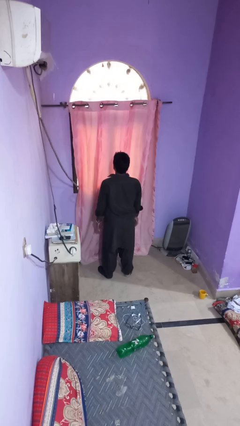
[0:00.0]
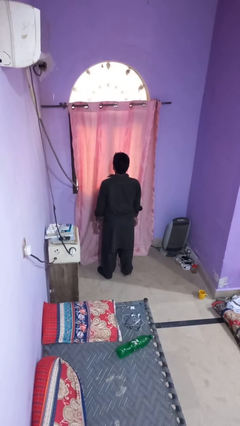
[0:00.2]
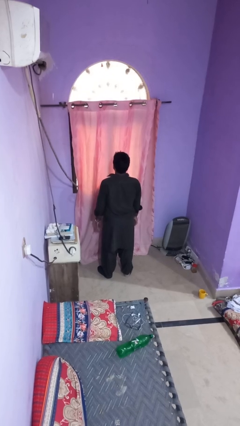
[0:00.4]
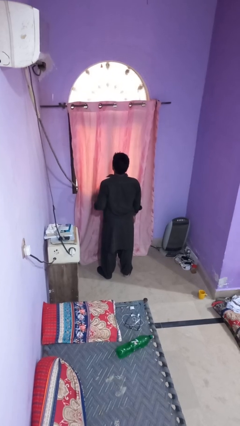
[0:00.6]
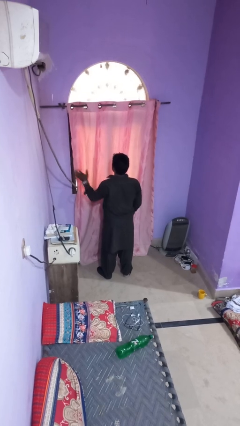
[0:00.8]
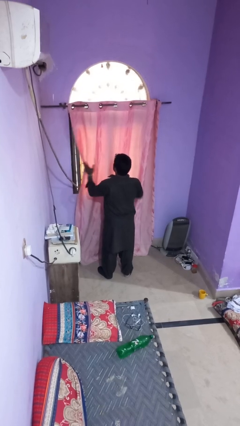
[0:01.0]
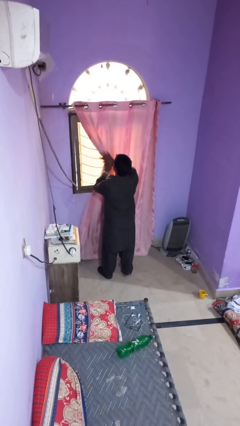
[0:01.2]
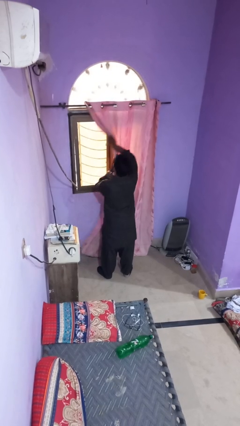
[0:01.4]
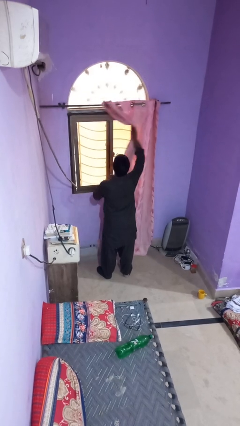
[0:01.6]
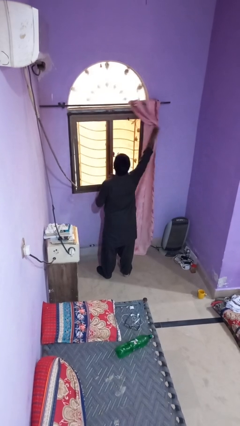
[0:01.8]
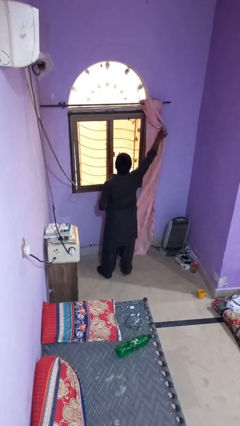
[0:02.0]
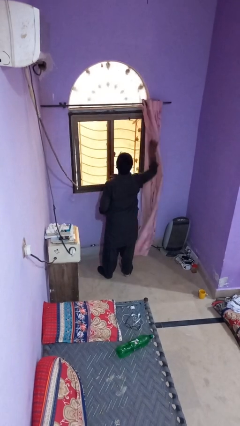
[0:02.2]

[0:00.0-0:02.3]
person opens curtains

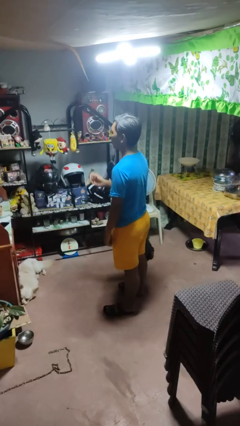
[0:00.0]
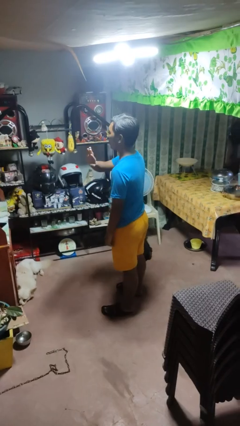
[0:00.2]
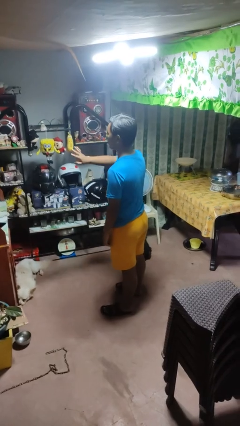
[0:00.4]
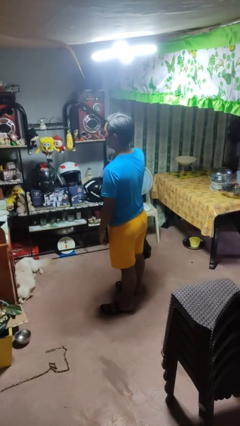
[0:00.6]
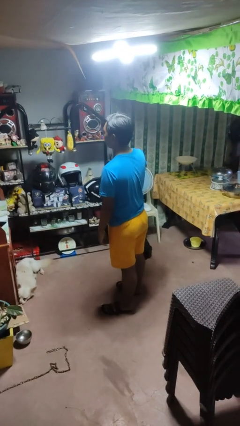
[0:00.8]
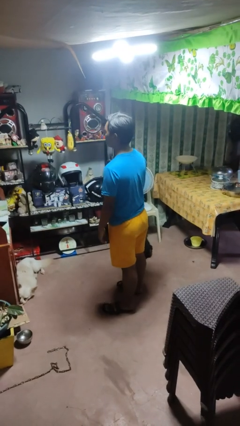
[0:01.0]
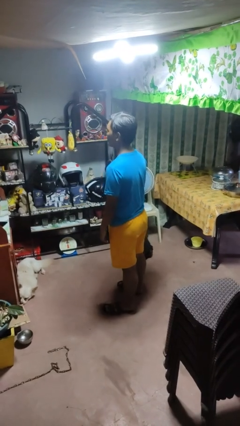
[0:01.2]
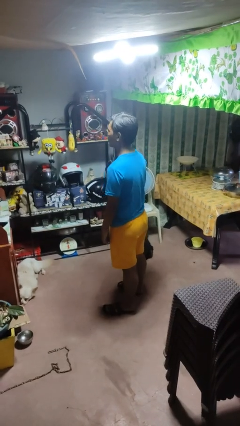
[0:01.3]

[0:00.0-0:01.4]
person gestures swipe right

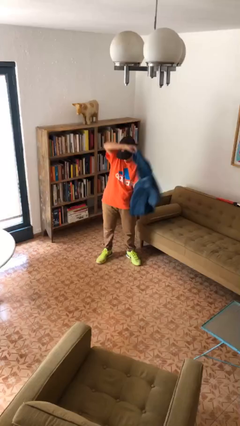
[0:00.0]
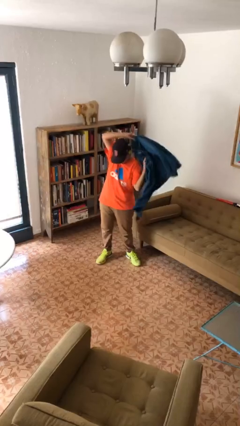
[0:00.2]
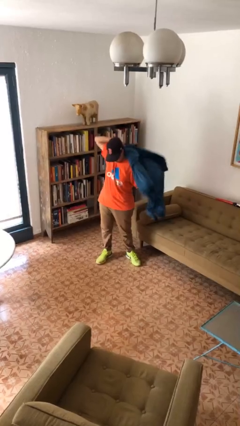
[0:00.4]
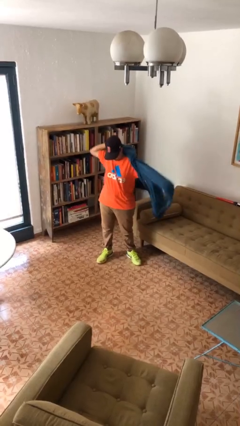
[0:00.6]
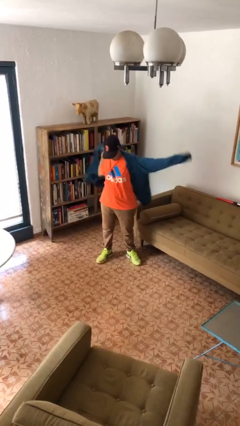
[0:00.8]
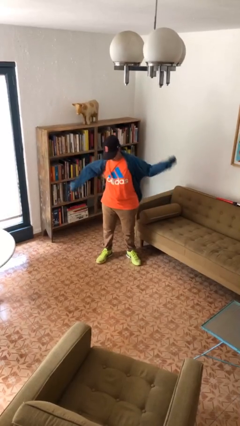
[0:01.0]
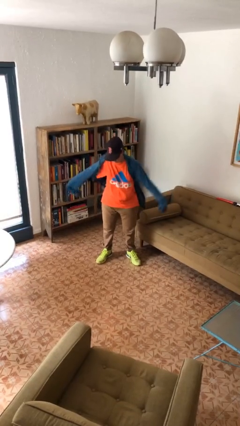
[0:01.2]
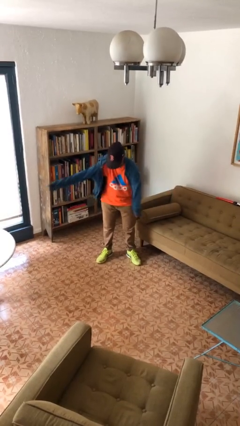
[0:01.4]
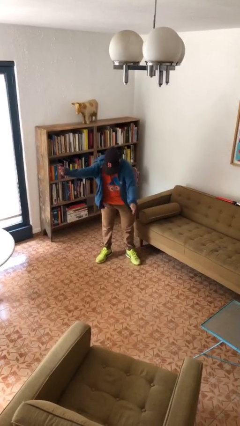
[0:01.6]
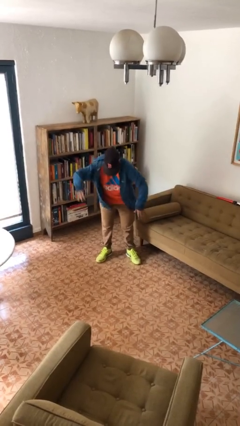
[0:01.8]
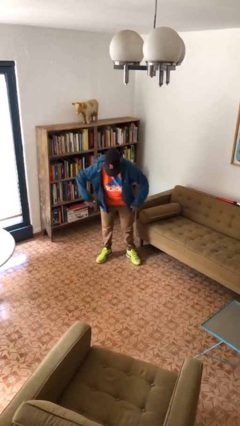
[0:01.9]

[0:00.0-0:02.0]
person puts on jacket

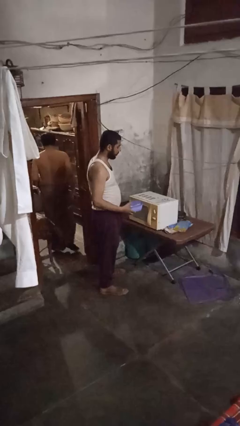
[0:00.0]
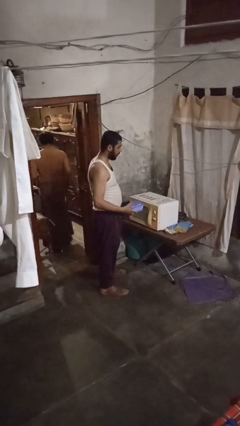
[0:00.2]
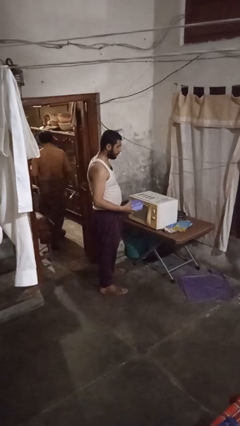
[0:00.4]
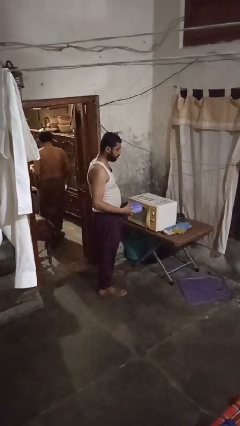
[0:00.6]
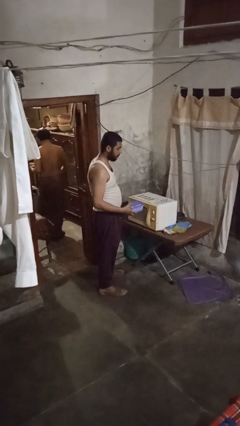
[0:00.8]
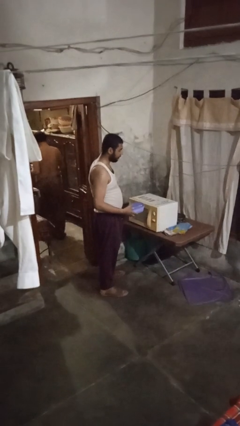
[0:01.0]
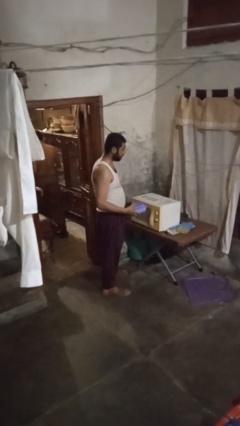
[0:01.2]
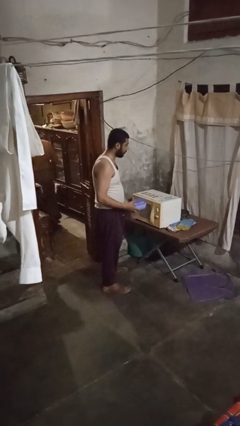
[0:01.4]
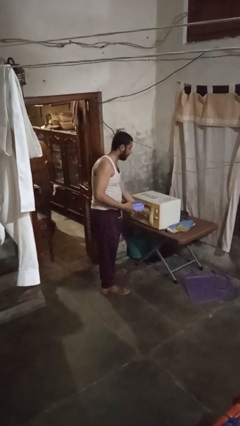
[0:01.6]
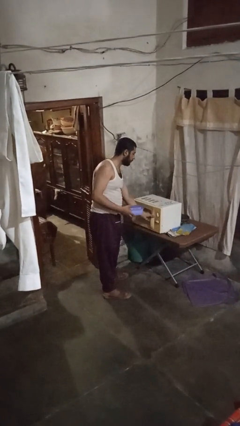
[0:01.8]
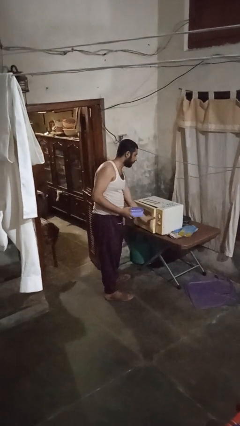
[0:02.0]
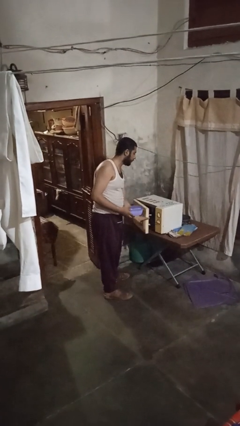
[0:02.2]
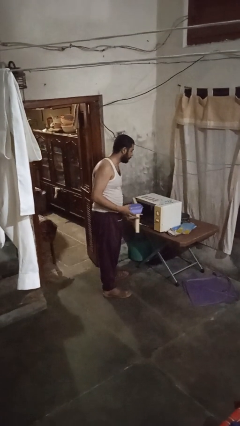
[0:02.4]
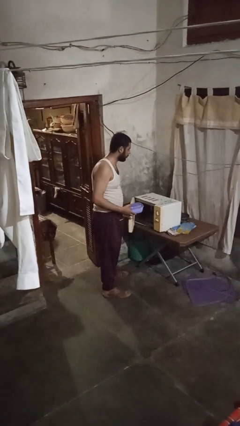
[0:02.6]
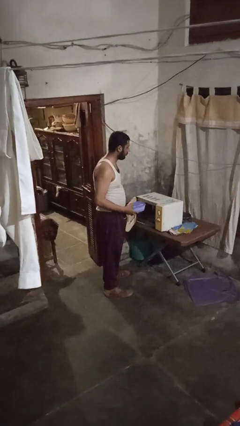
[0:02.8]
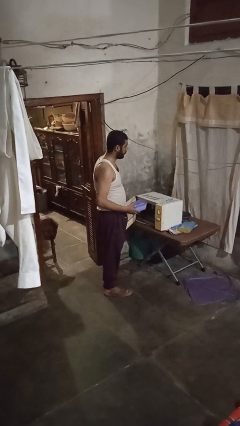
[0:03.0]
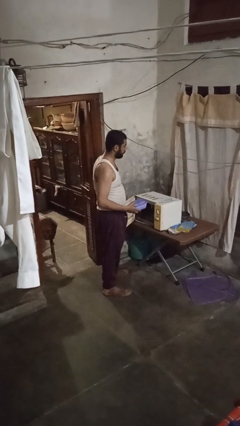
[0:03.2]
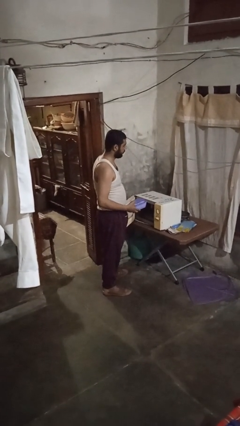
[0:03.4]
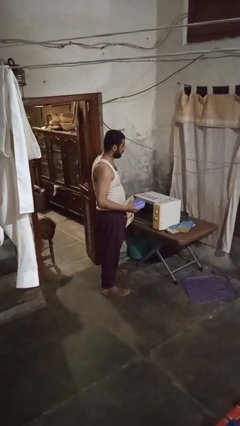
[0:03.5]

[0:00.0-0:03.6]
person opens microwave

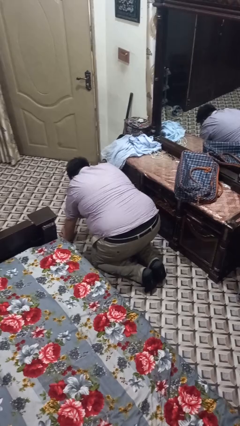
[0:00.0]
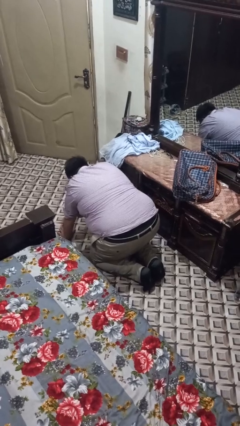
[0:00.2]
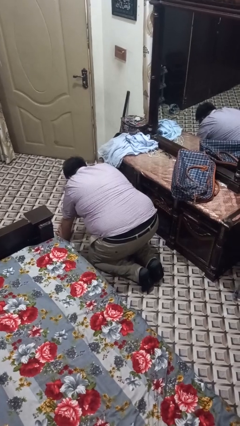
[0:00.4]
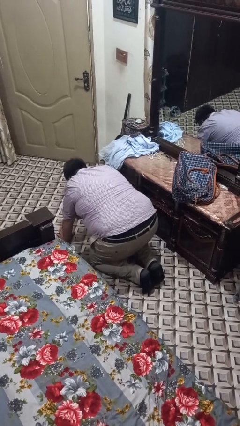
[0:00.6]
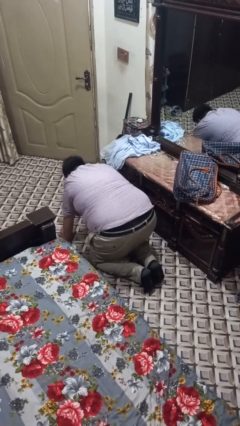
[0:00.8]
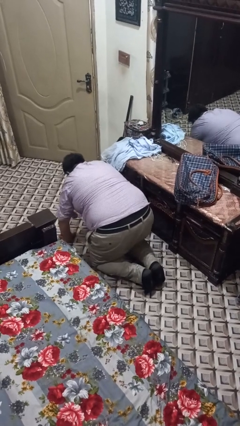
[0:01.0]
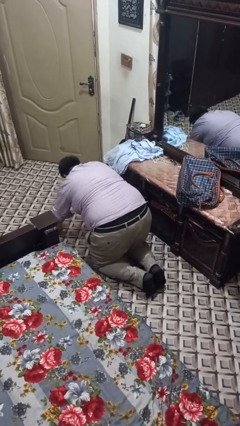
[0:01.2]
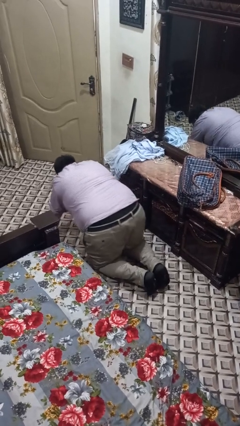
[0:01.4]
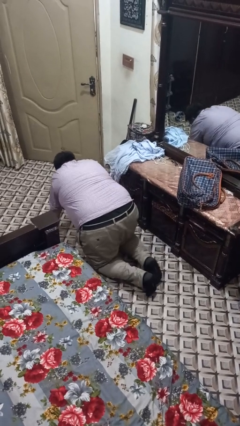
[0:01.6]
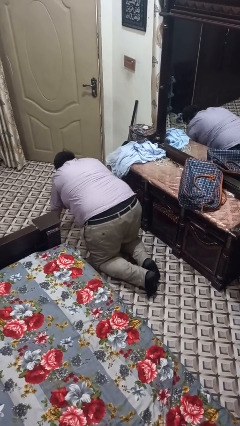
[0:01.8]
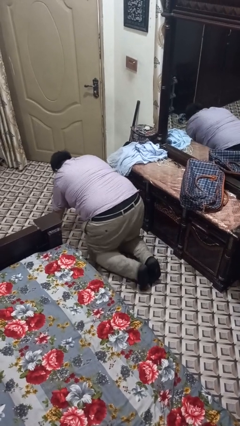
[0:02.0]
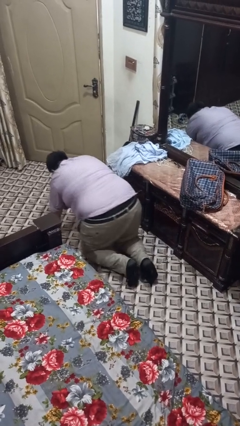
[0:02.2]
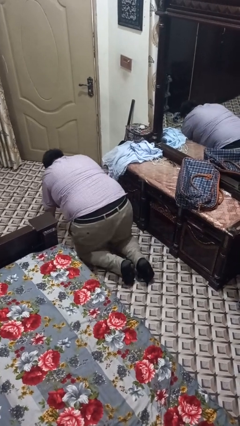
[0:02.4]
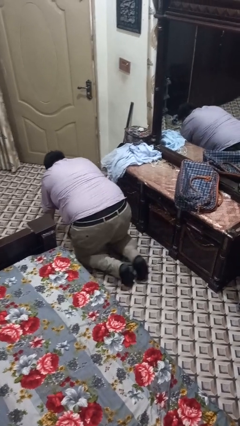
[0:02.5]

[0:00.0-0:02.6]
person crawls

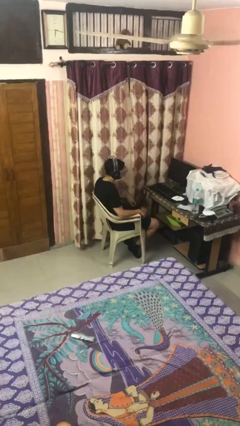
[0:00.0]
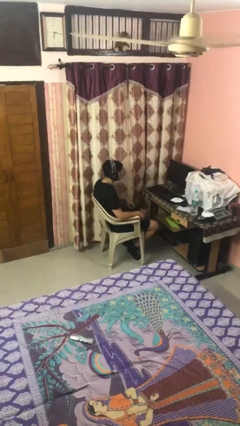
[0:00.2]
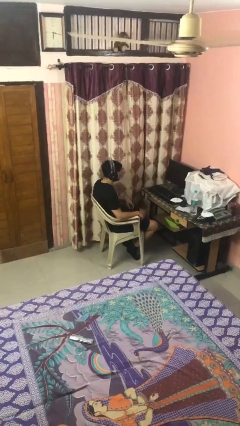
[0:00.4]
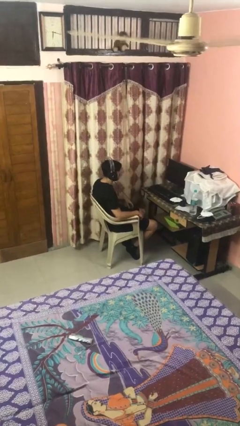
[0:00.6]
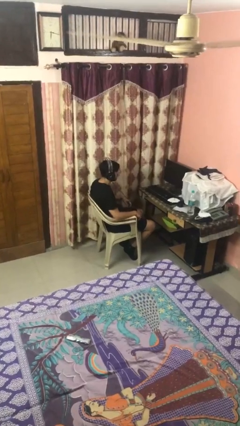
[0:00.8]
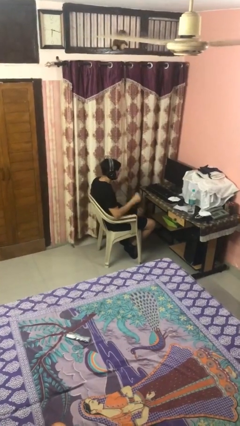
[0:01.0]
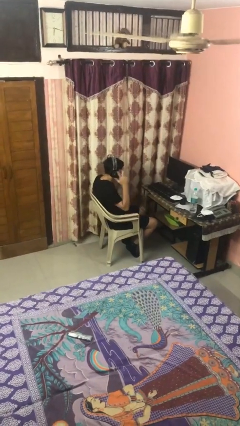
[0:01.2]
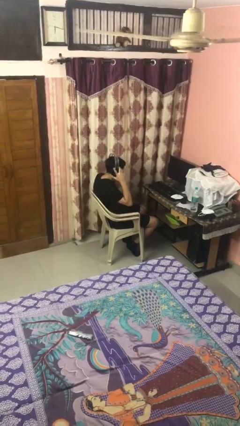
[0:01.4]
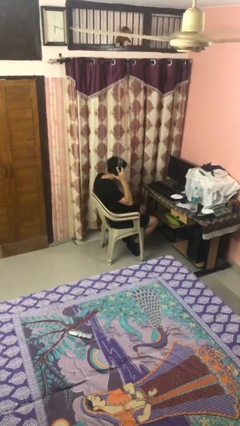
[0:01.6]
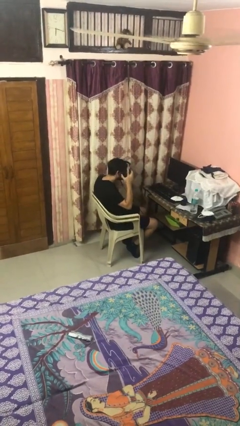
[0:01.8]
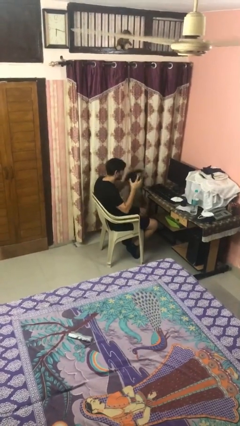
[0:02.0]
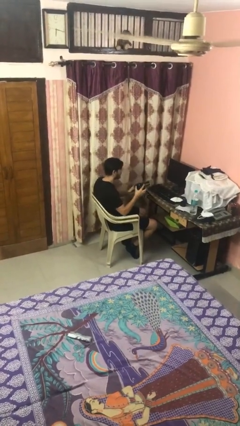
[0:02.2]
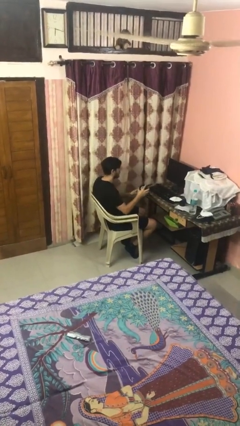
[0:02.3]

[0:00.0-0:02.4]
person takes off headphones

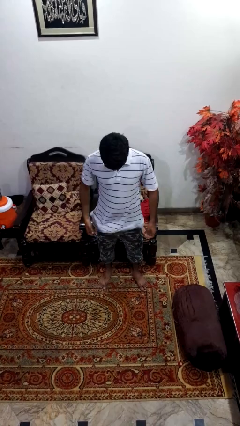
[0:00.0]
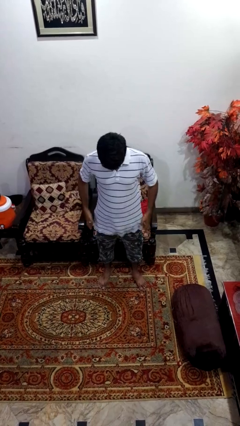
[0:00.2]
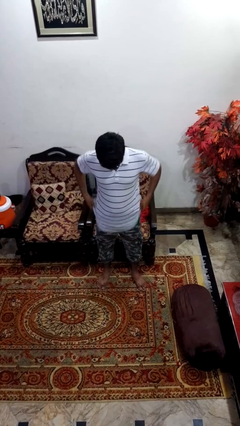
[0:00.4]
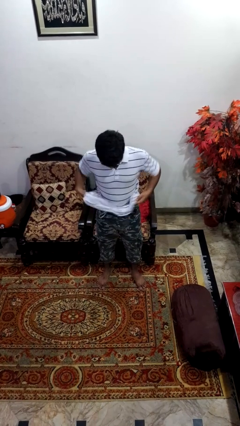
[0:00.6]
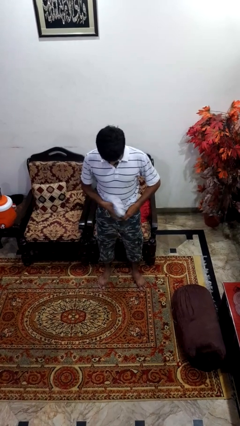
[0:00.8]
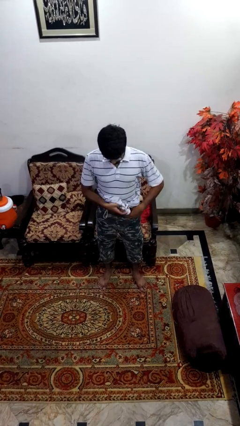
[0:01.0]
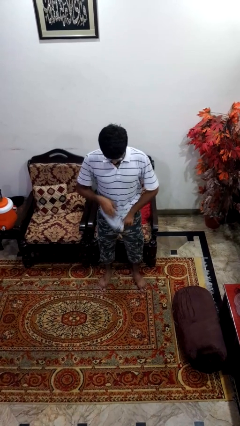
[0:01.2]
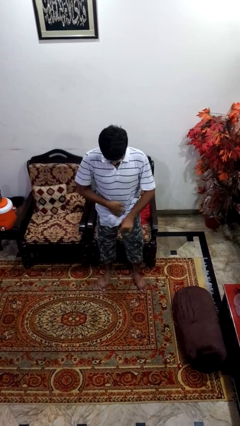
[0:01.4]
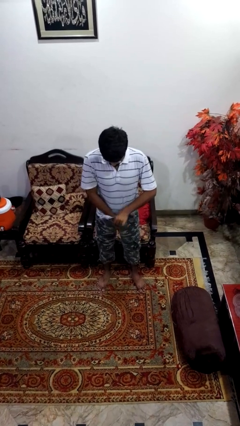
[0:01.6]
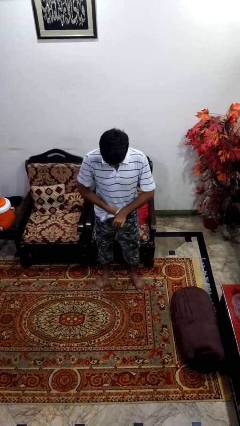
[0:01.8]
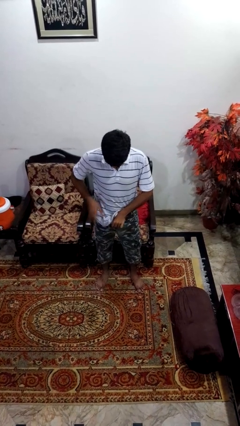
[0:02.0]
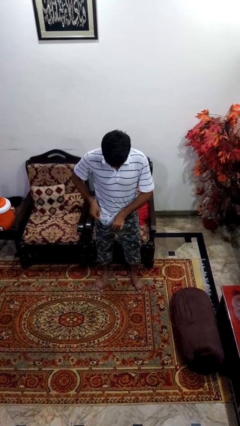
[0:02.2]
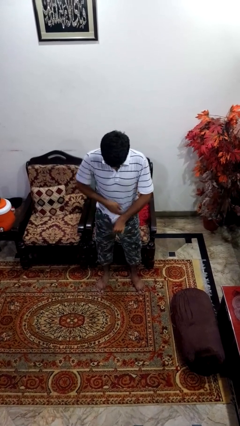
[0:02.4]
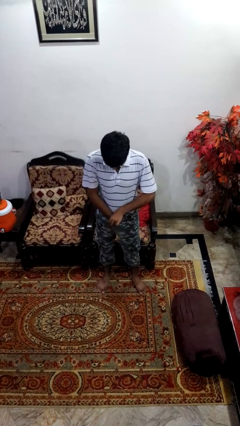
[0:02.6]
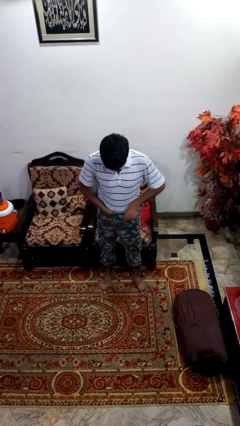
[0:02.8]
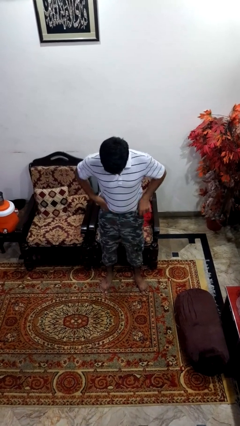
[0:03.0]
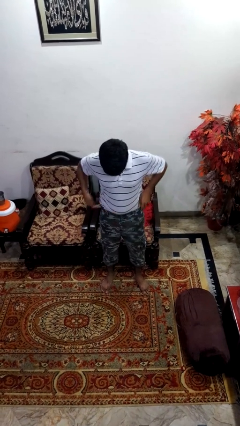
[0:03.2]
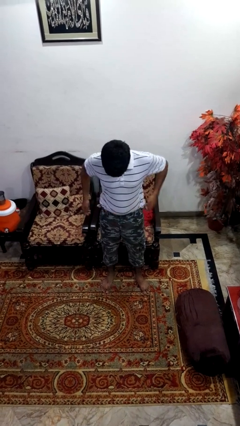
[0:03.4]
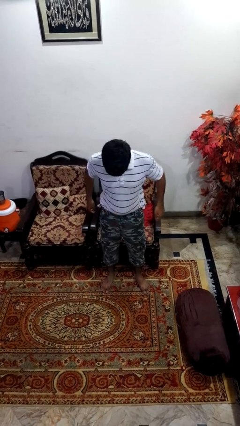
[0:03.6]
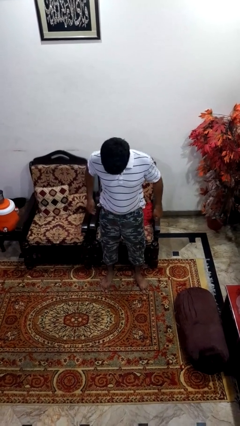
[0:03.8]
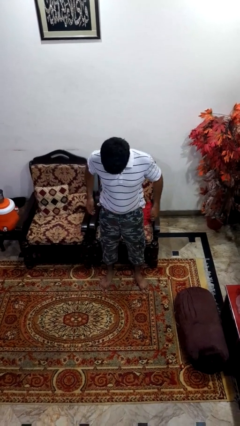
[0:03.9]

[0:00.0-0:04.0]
person tucks in shirt
